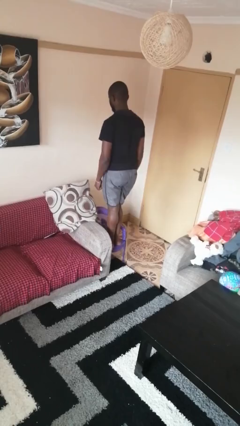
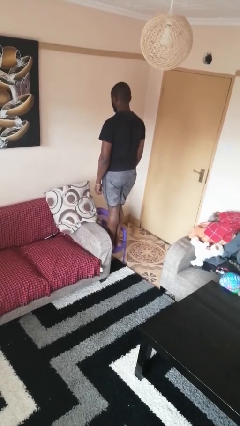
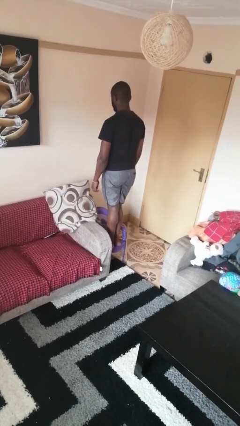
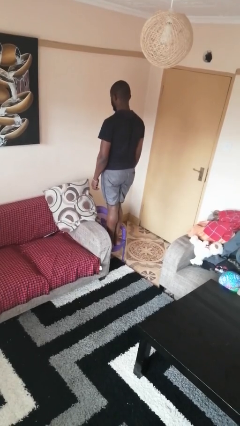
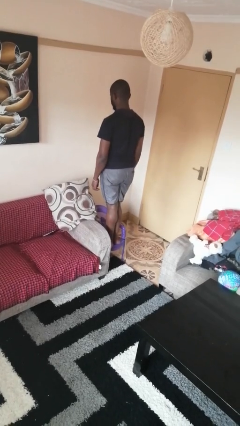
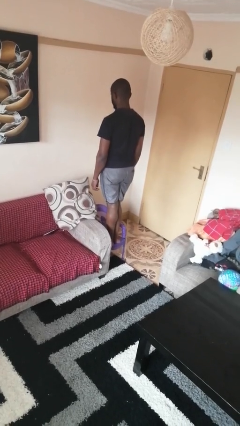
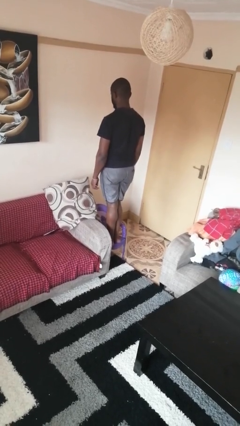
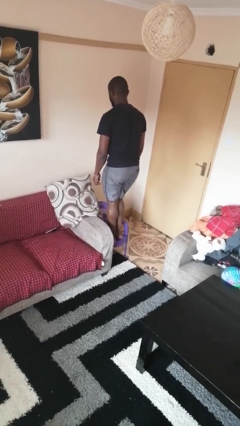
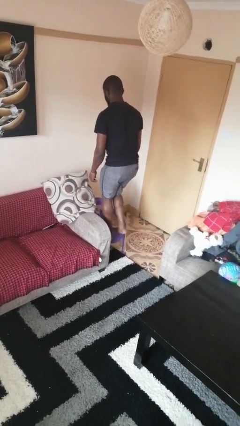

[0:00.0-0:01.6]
person climbs on chair

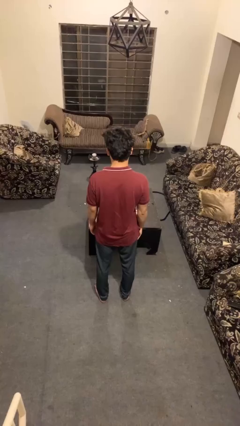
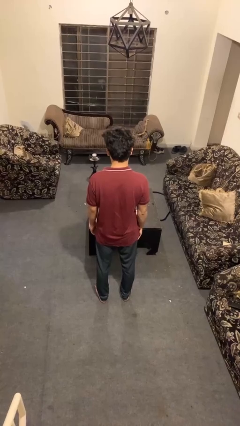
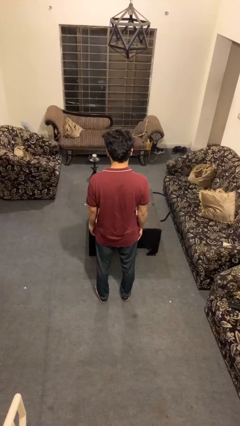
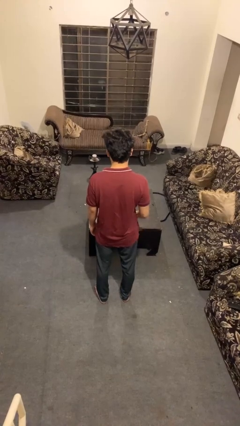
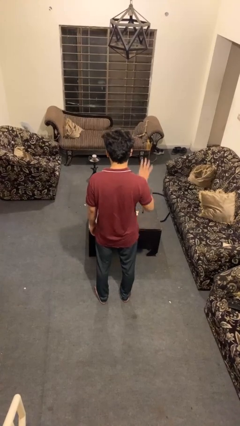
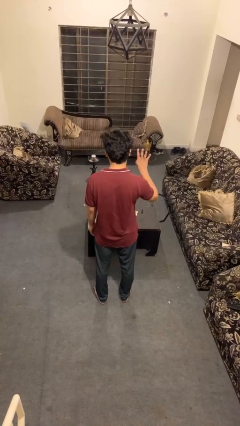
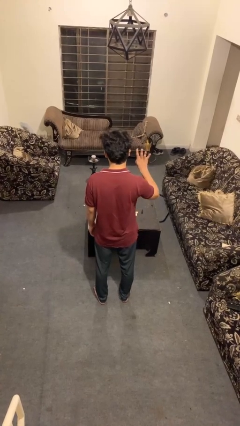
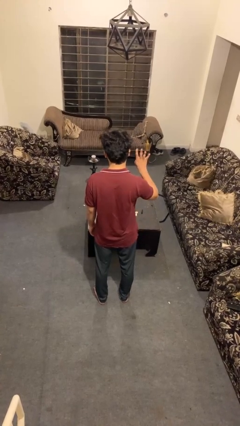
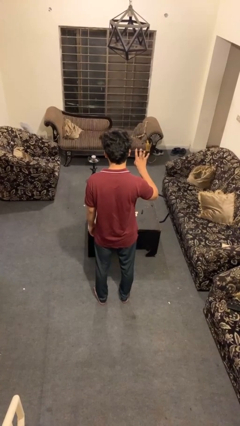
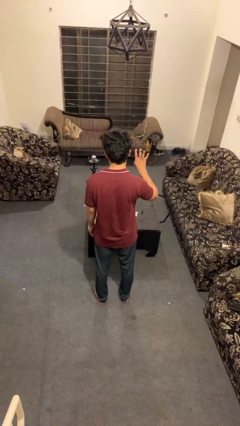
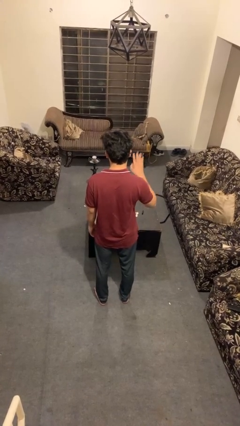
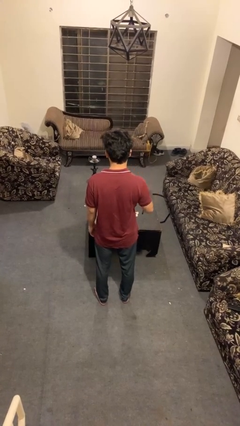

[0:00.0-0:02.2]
person gestures number four

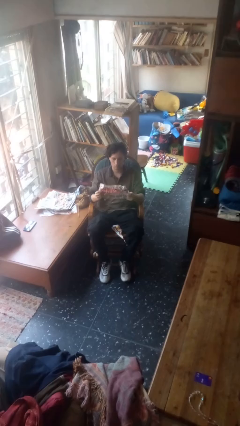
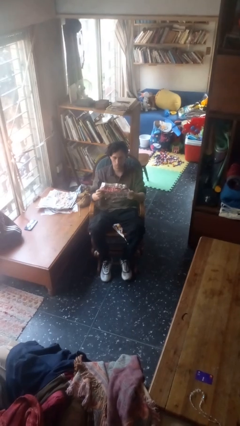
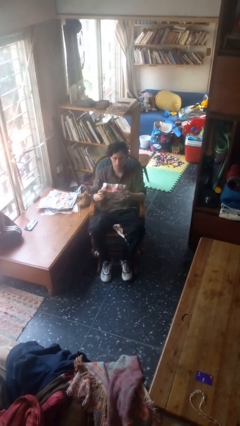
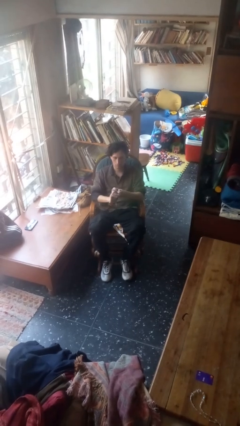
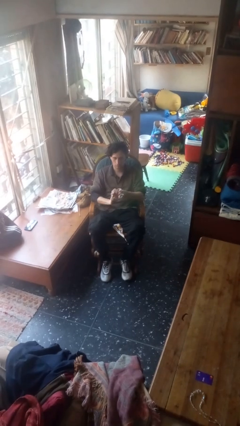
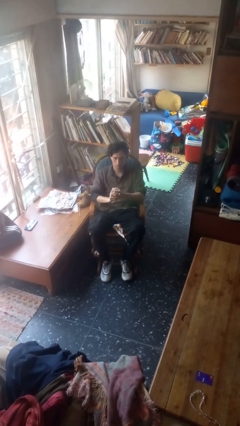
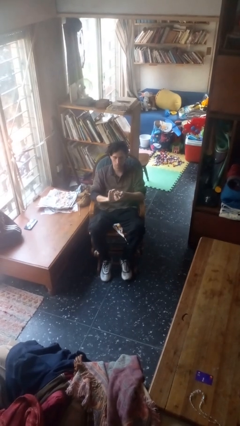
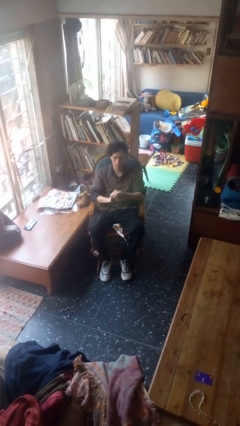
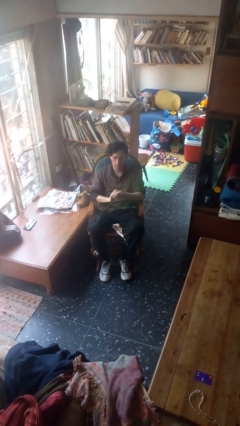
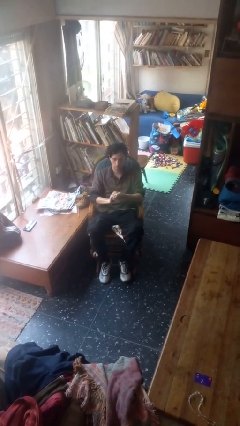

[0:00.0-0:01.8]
person crumples paper

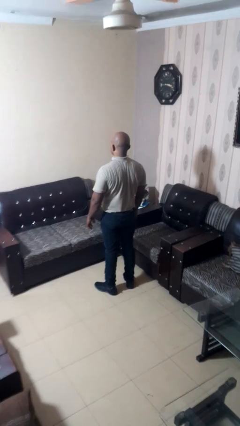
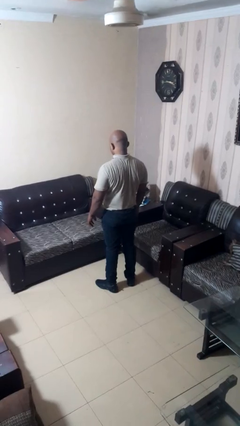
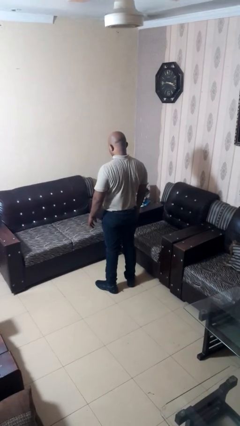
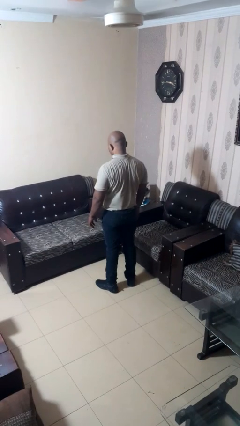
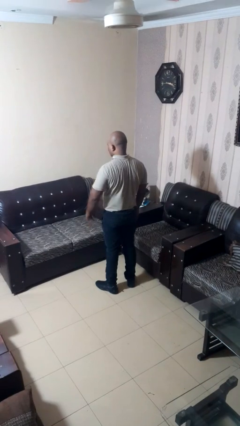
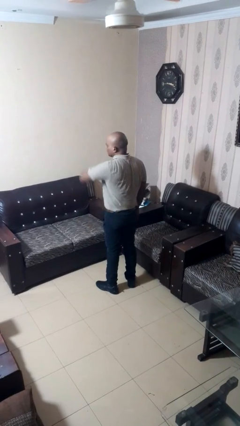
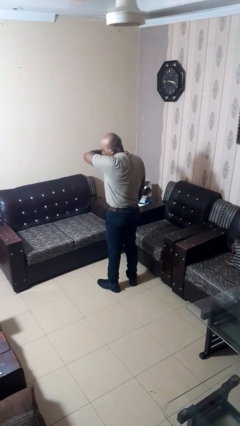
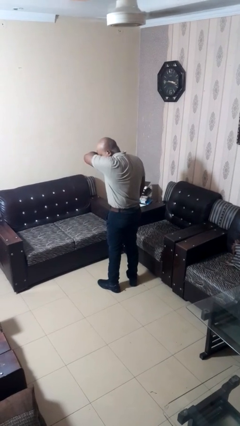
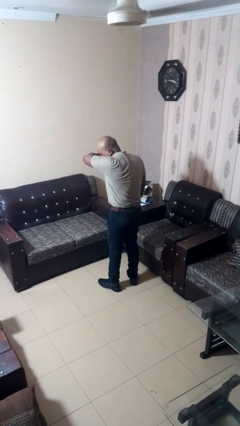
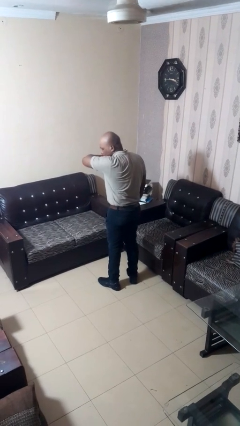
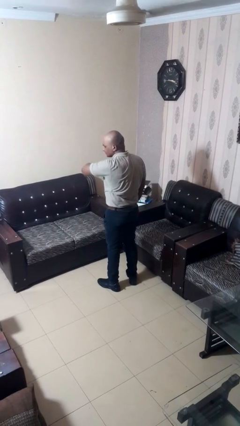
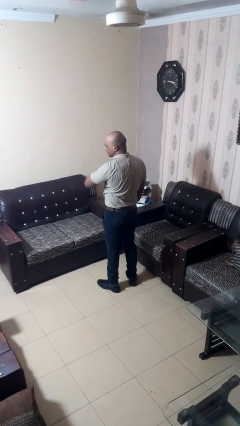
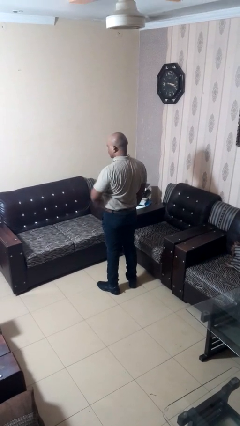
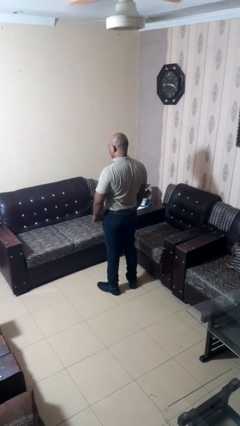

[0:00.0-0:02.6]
person sneezes into arm

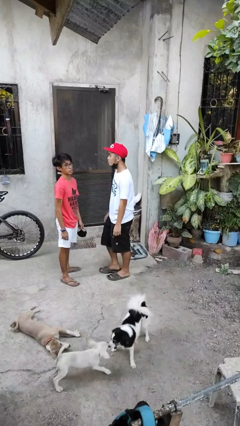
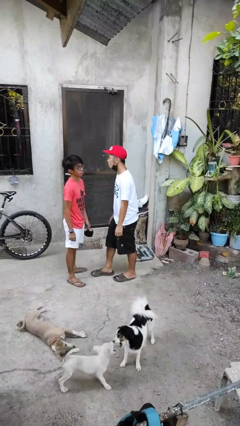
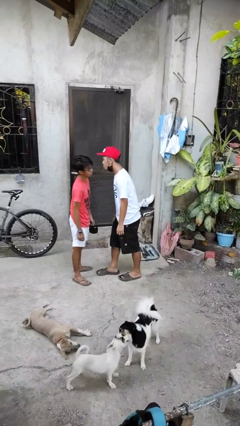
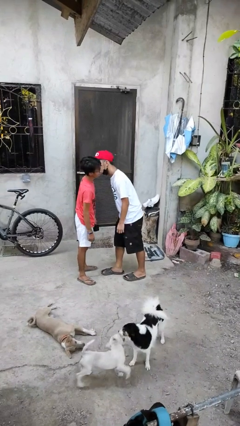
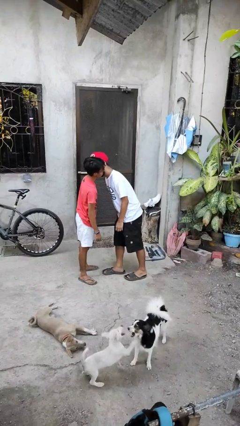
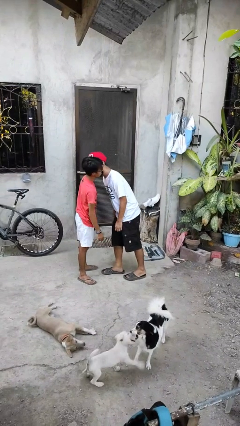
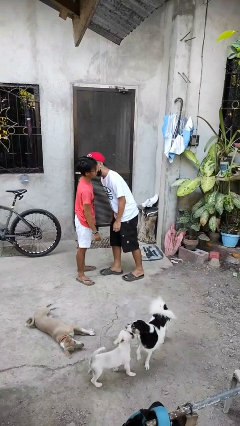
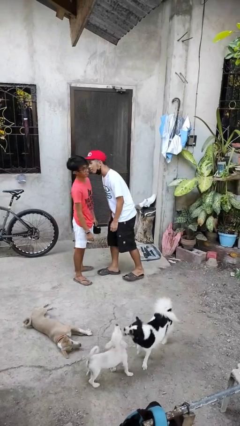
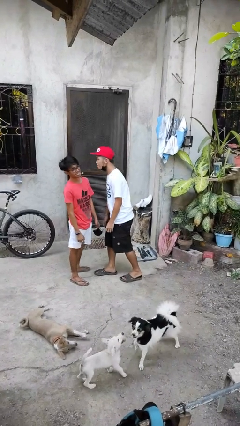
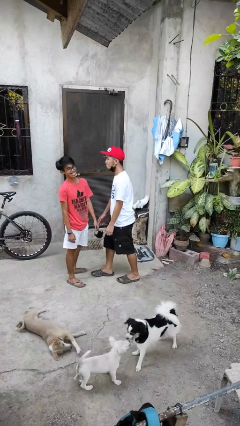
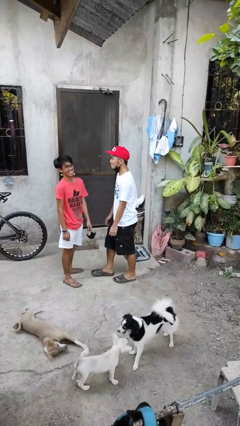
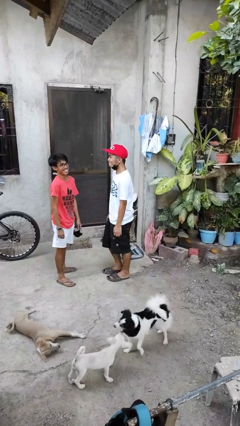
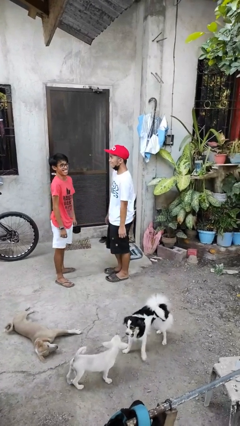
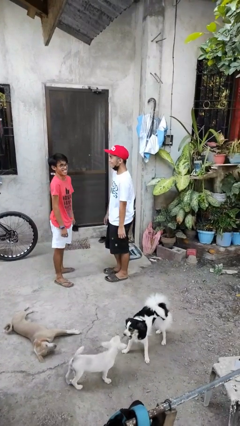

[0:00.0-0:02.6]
person kisses cheek of person

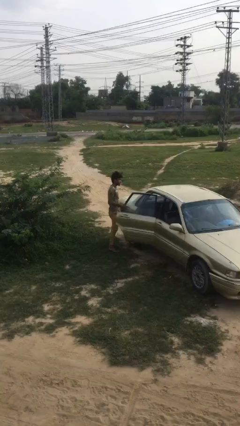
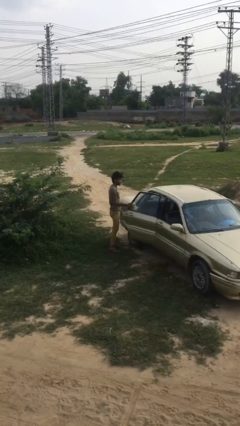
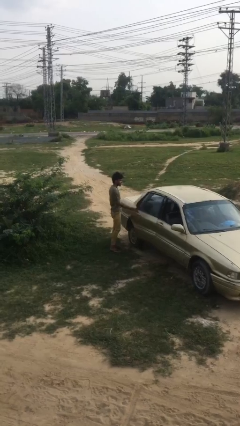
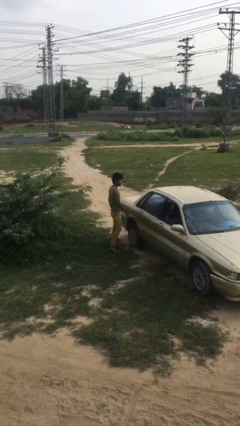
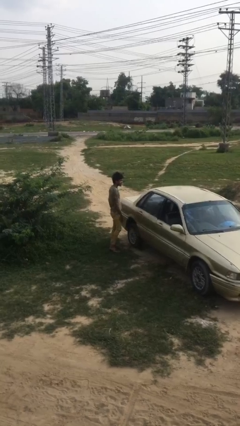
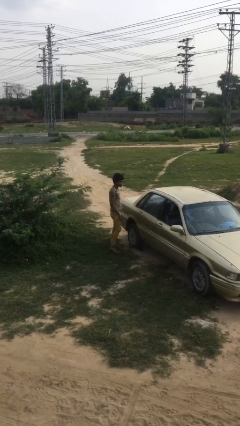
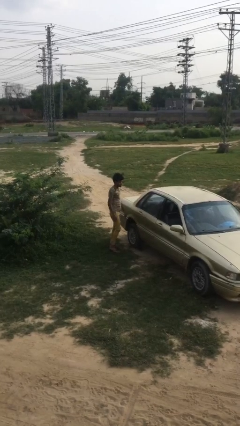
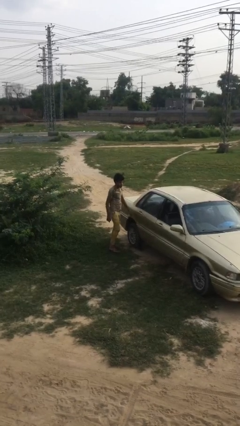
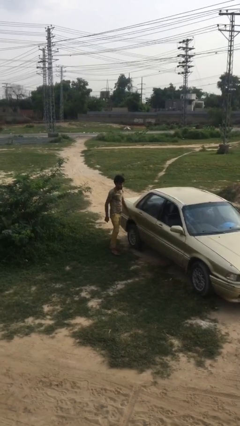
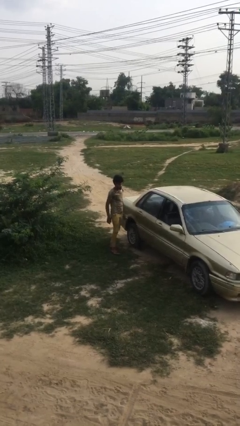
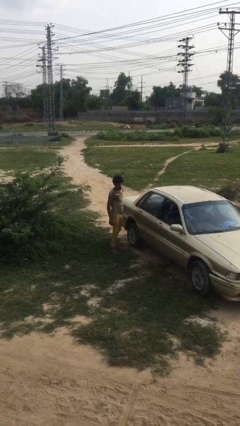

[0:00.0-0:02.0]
person closes car door

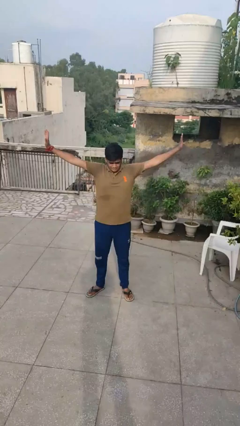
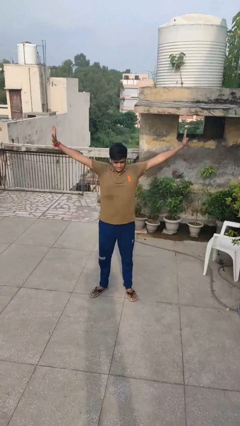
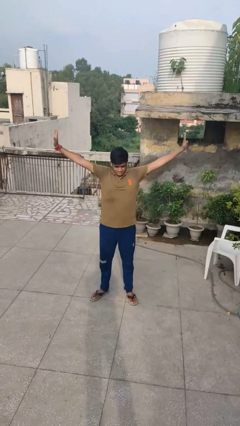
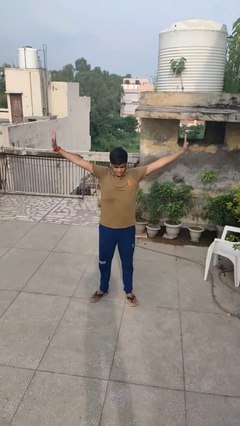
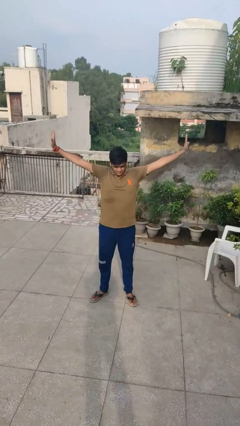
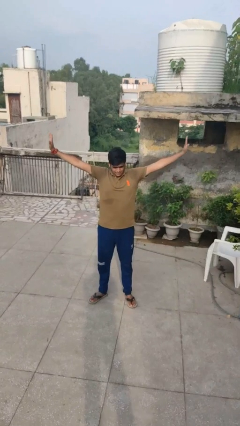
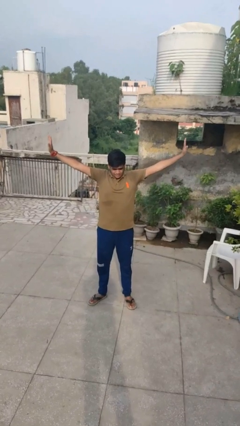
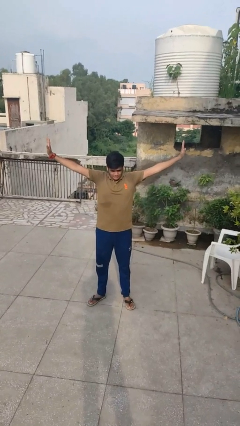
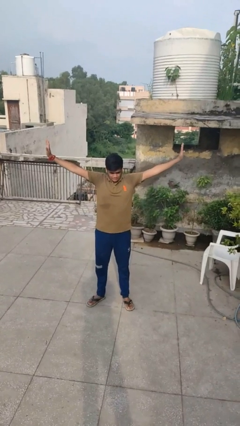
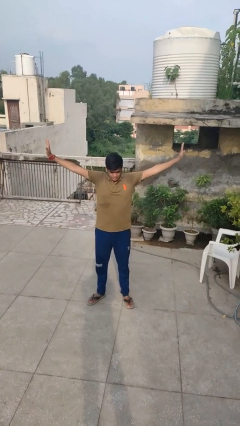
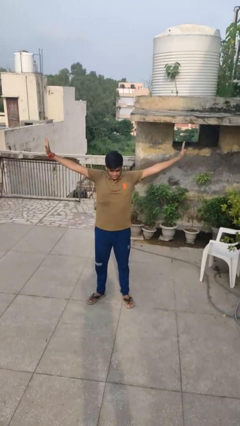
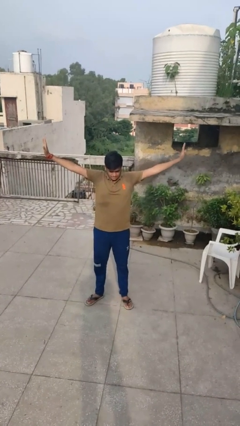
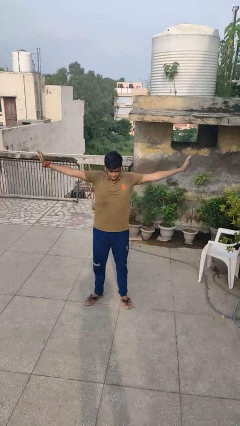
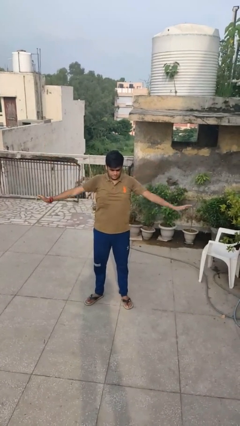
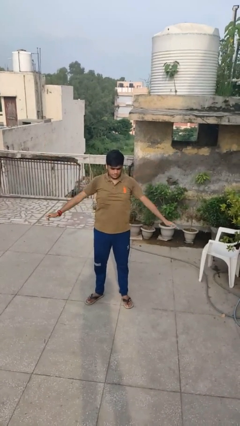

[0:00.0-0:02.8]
person stretches arms to side

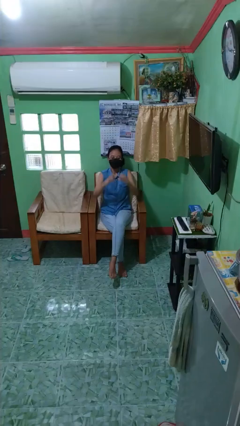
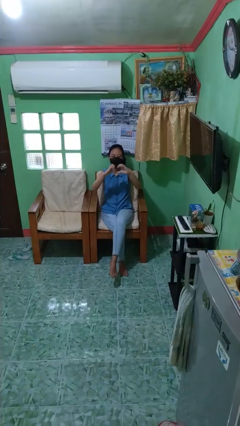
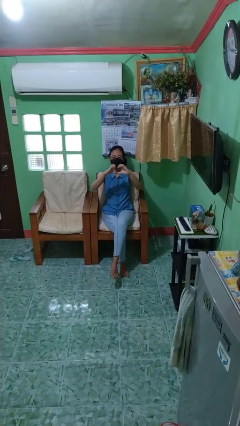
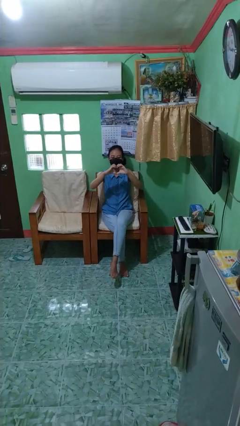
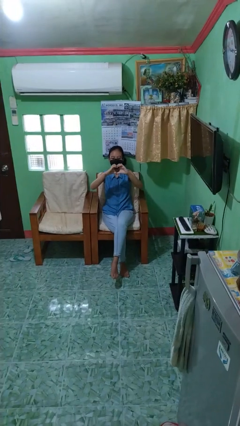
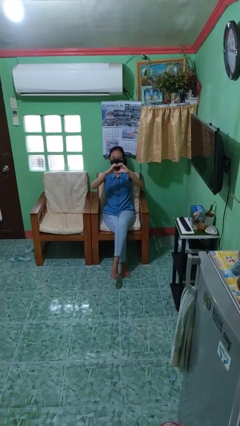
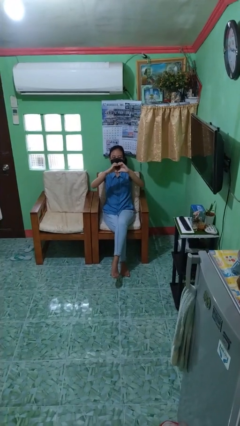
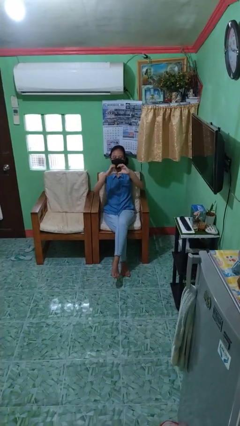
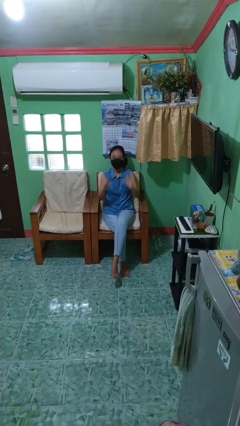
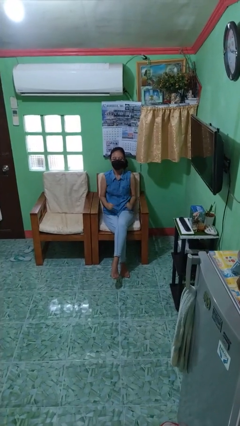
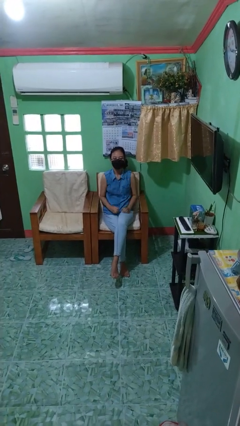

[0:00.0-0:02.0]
person gestures heart
